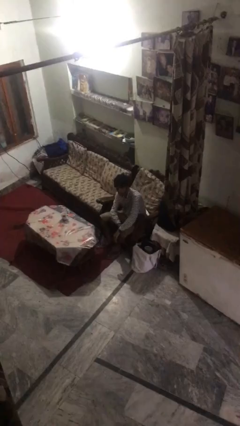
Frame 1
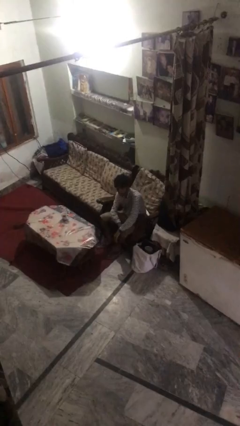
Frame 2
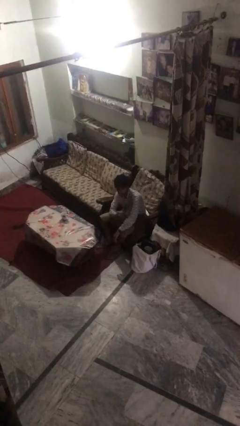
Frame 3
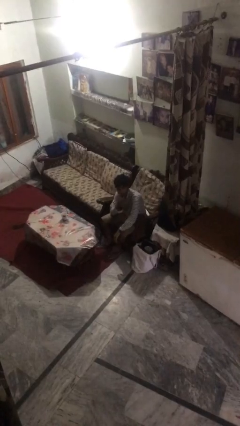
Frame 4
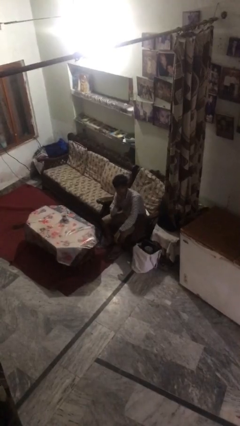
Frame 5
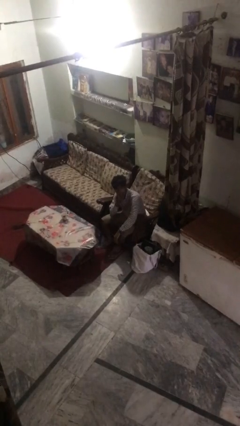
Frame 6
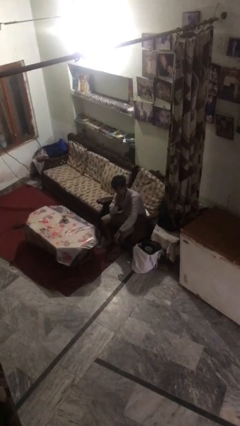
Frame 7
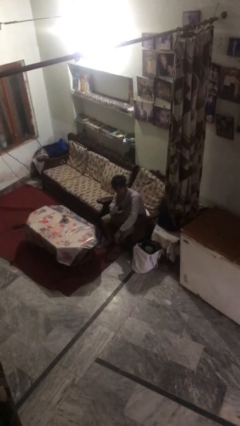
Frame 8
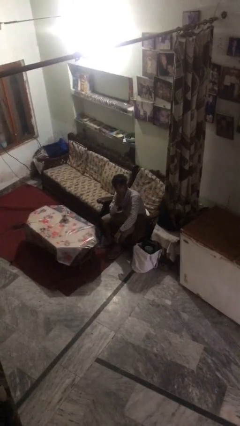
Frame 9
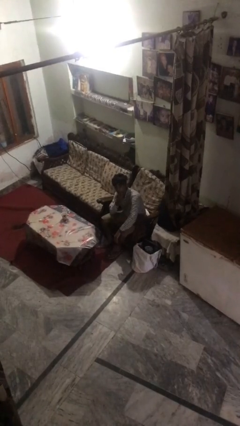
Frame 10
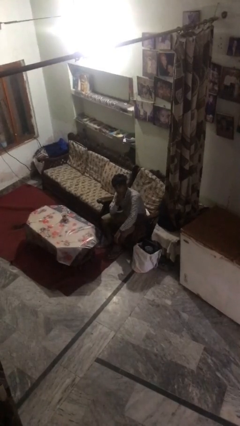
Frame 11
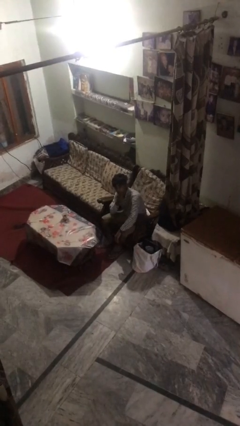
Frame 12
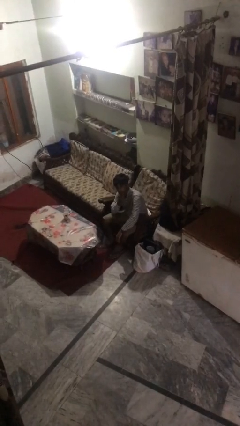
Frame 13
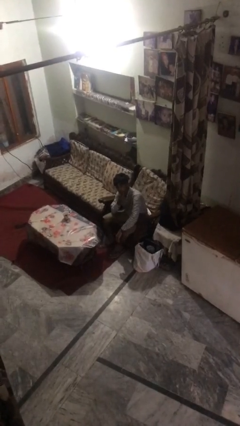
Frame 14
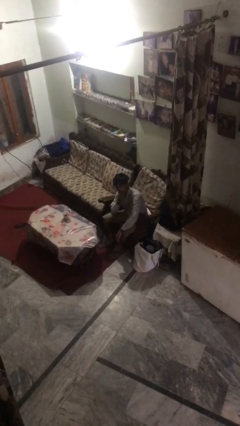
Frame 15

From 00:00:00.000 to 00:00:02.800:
person strokes chin

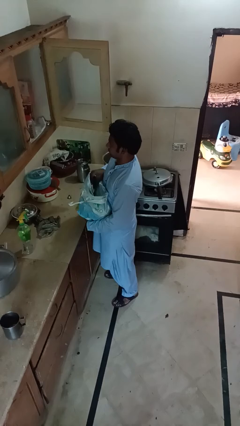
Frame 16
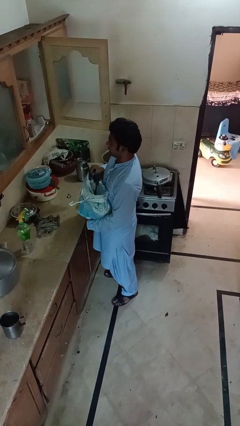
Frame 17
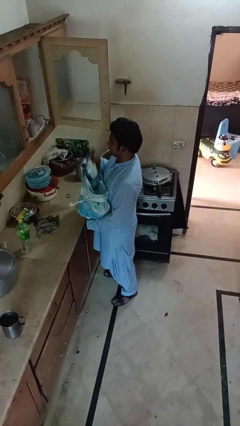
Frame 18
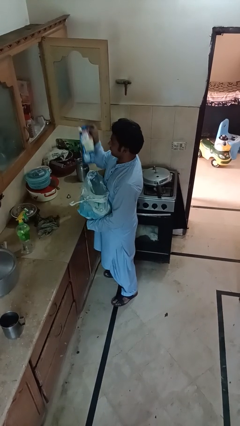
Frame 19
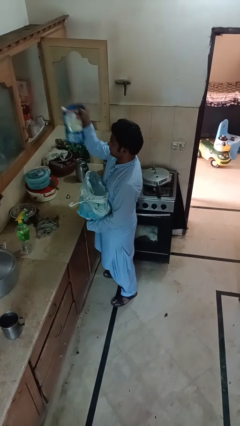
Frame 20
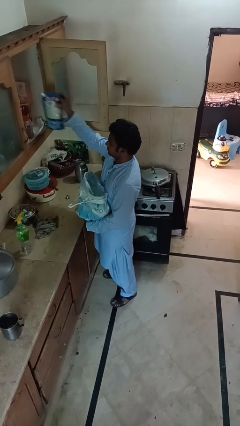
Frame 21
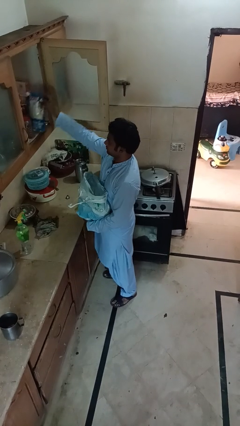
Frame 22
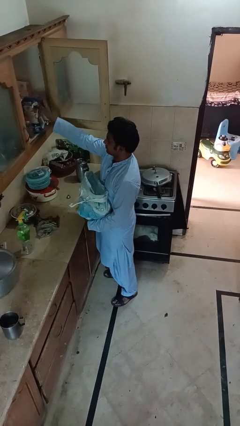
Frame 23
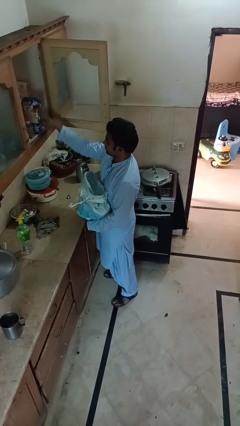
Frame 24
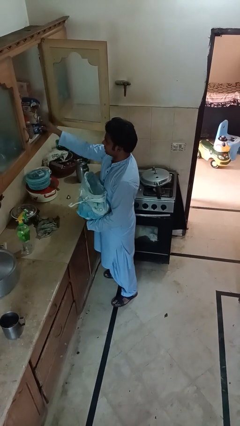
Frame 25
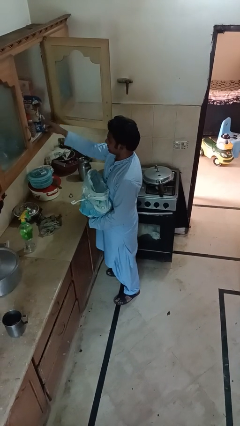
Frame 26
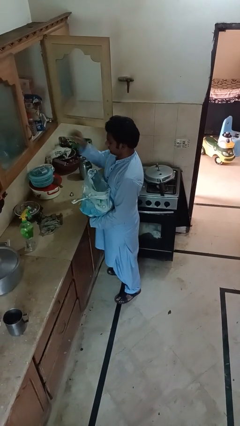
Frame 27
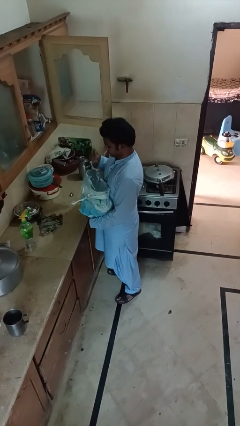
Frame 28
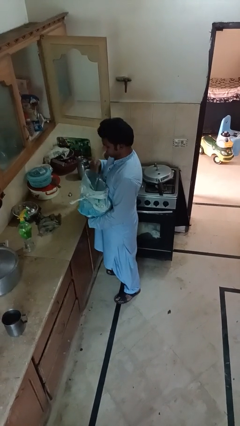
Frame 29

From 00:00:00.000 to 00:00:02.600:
person loads groceries into cabinet

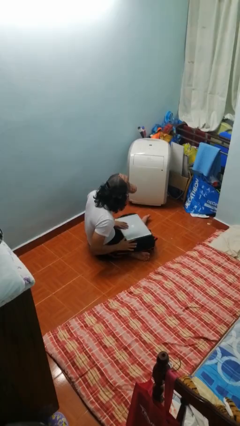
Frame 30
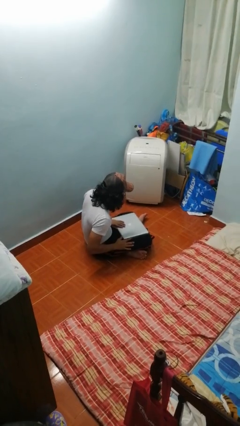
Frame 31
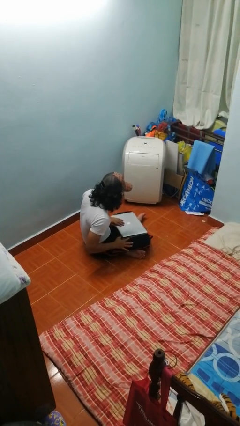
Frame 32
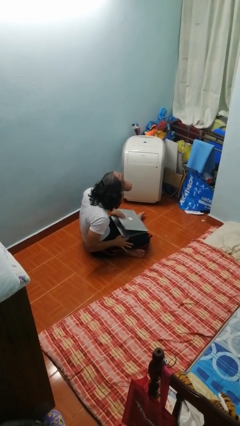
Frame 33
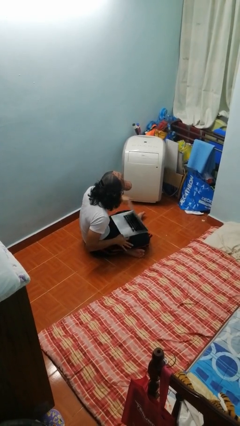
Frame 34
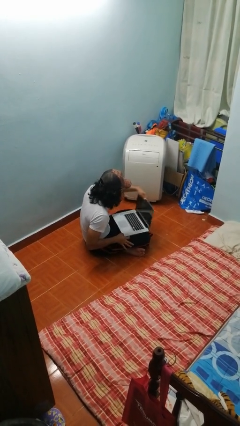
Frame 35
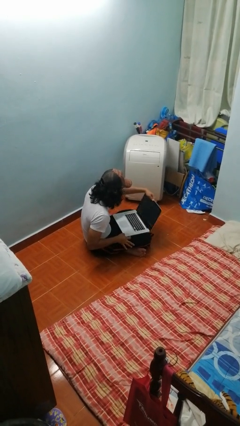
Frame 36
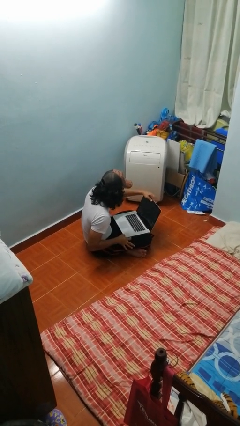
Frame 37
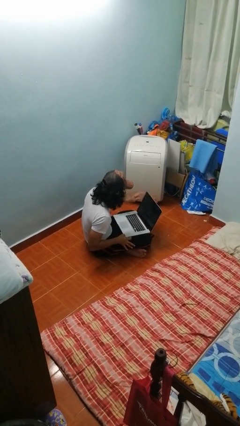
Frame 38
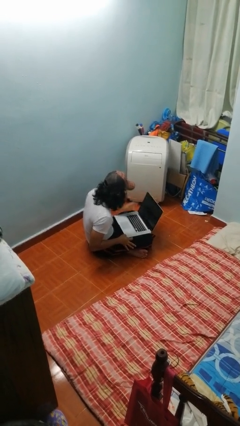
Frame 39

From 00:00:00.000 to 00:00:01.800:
person opens laptop

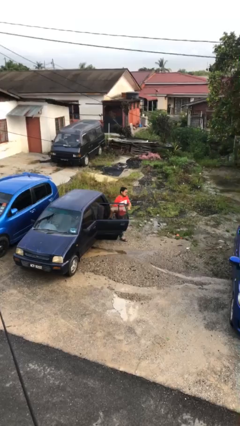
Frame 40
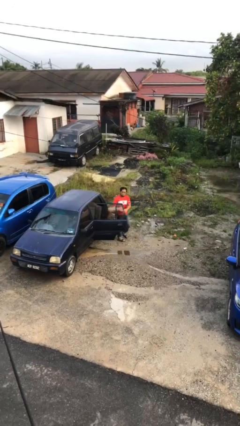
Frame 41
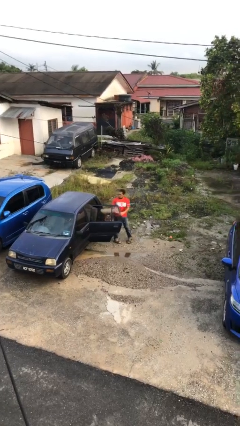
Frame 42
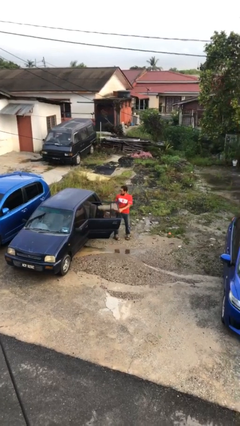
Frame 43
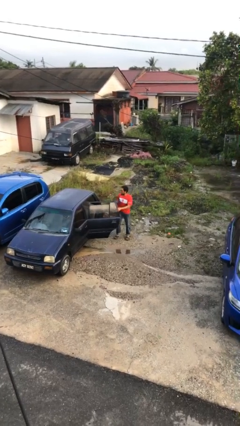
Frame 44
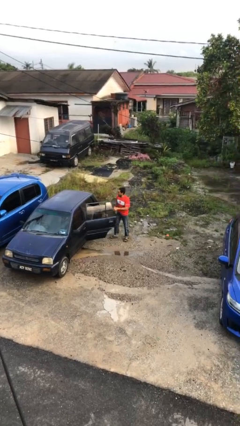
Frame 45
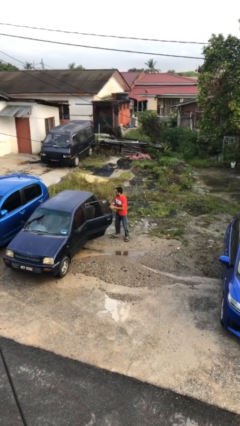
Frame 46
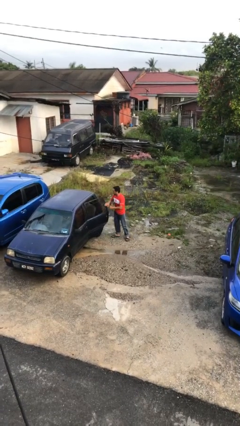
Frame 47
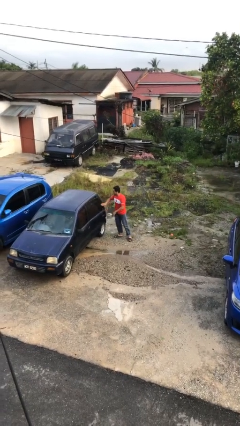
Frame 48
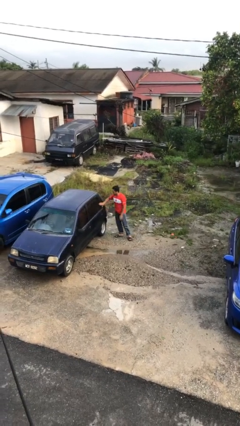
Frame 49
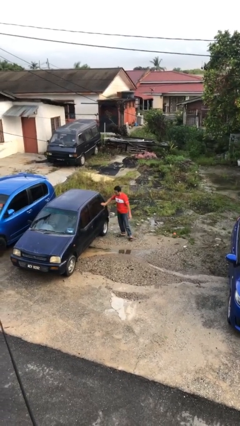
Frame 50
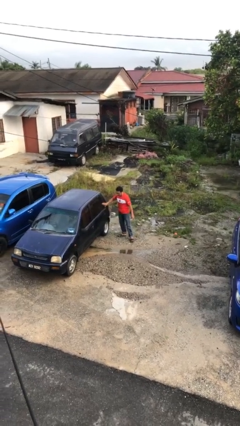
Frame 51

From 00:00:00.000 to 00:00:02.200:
person closes car door

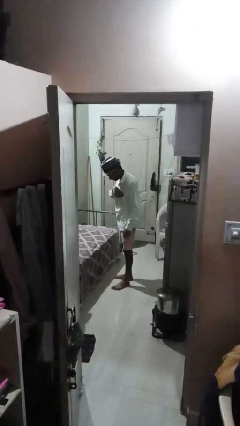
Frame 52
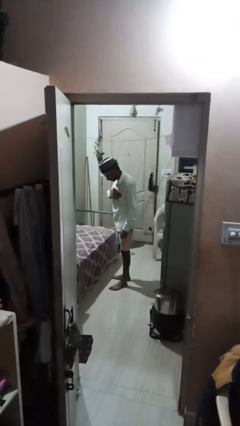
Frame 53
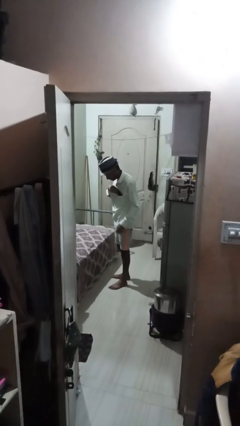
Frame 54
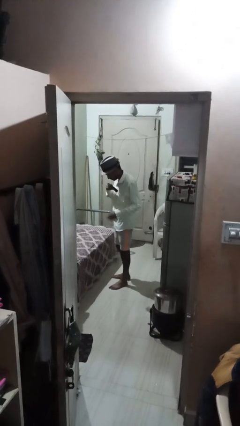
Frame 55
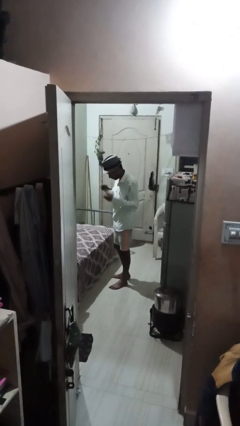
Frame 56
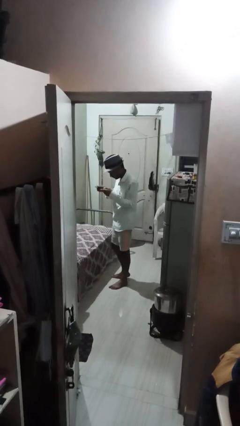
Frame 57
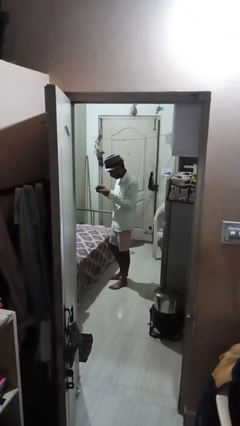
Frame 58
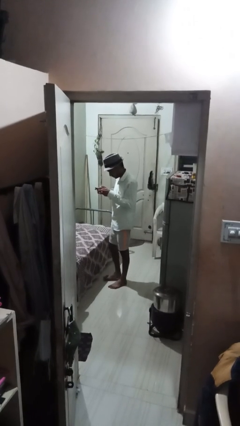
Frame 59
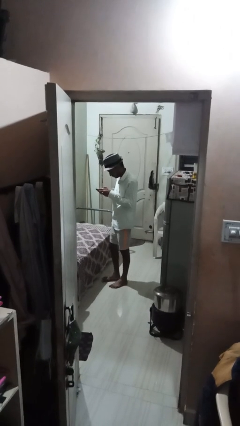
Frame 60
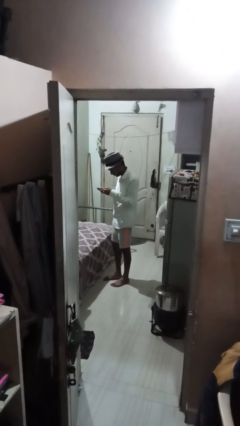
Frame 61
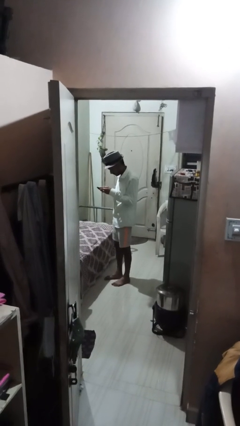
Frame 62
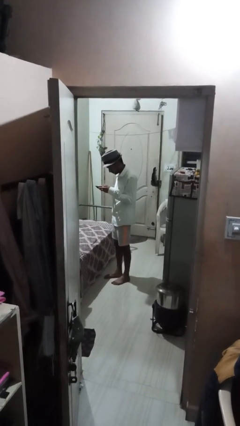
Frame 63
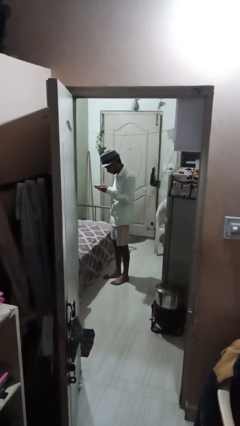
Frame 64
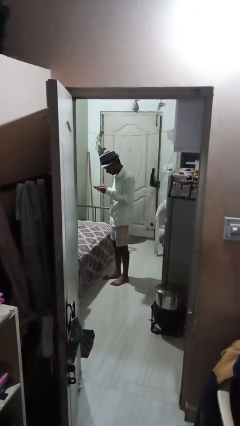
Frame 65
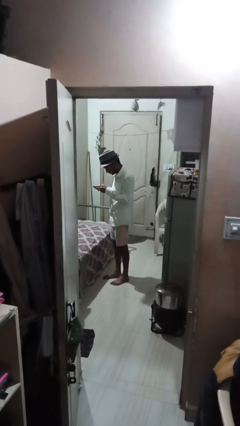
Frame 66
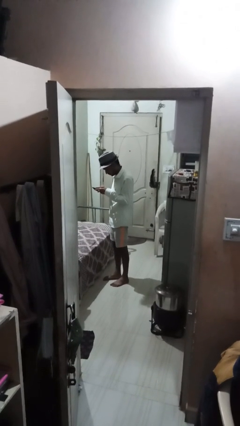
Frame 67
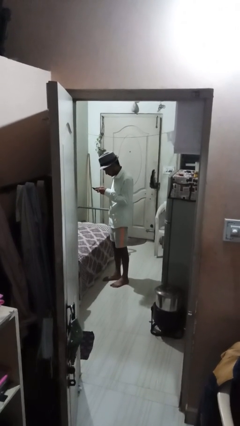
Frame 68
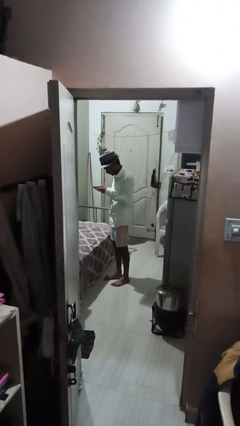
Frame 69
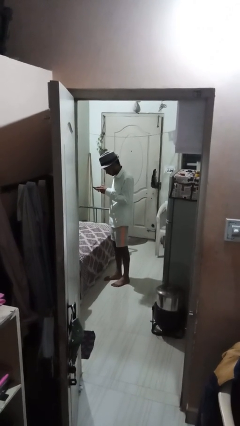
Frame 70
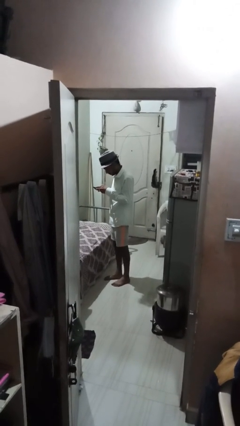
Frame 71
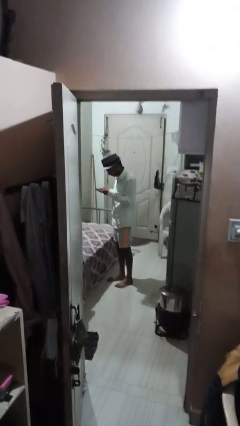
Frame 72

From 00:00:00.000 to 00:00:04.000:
person takes phone from pocket

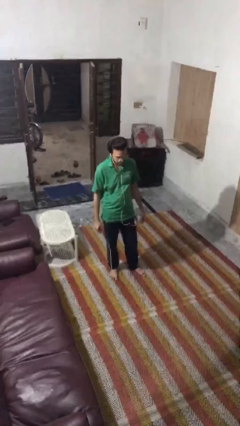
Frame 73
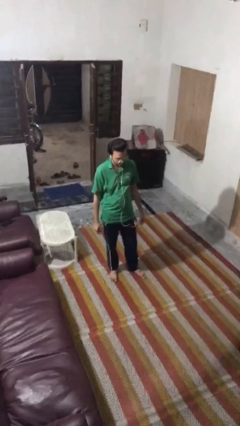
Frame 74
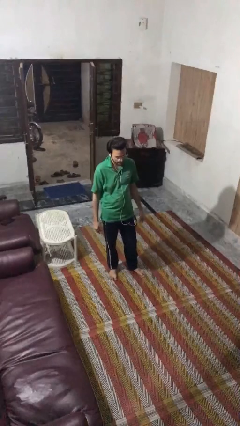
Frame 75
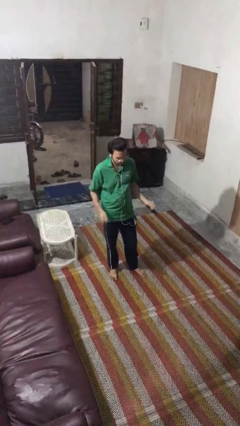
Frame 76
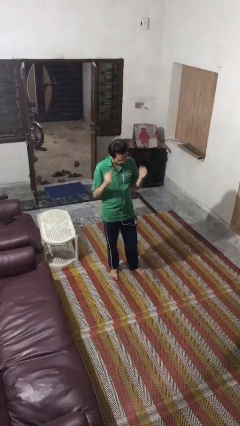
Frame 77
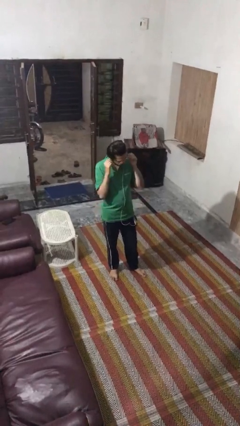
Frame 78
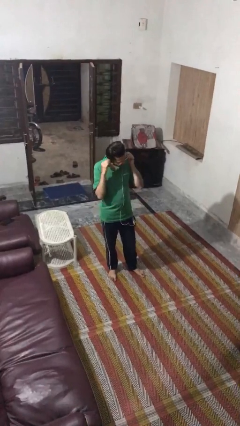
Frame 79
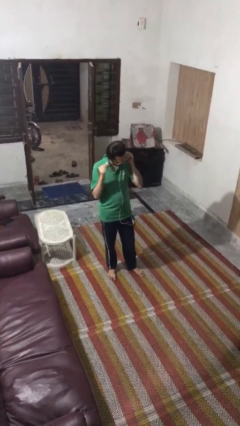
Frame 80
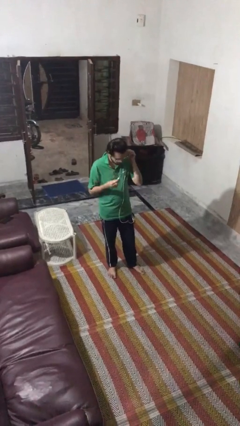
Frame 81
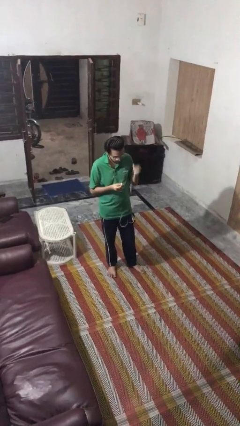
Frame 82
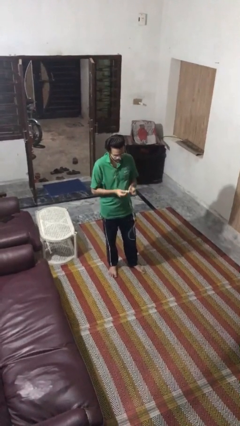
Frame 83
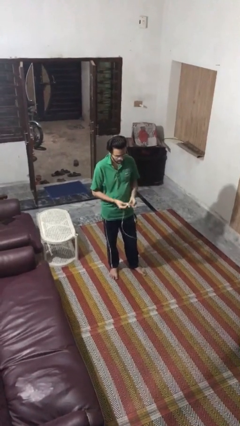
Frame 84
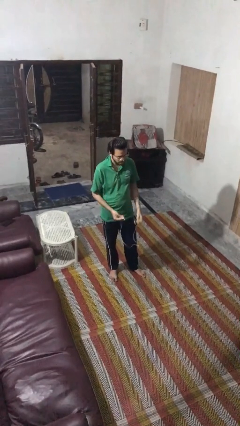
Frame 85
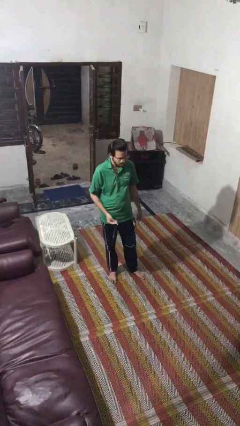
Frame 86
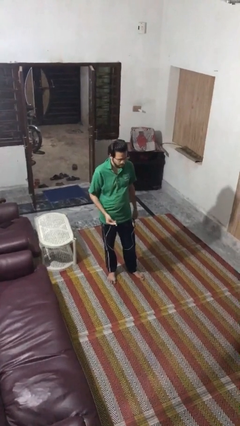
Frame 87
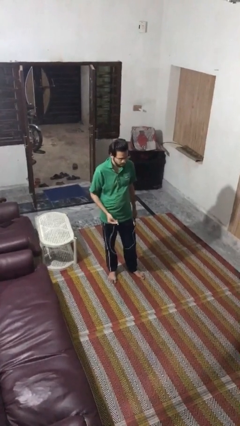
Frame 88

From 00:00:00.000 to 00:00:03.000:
person takes off headphones

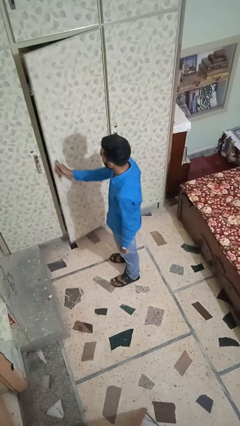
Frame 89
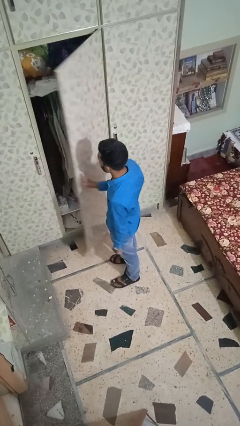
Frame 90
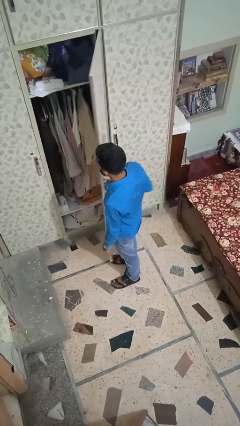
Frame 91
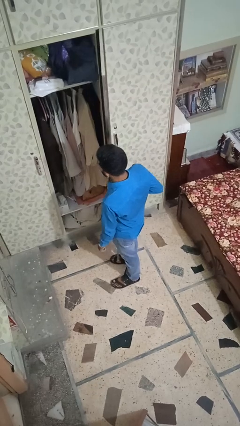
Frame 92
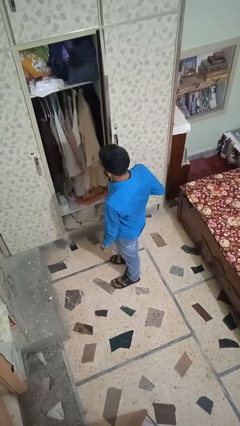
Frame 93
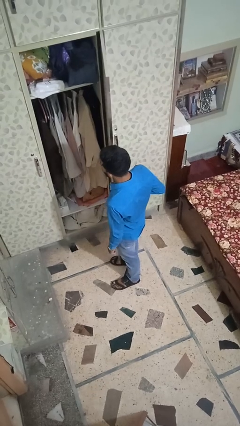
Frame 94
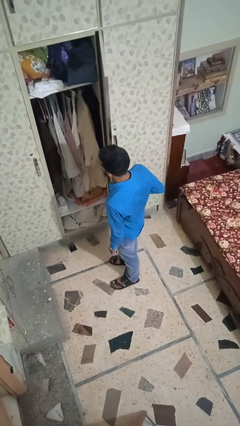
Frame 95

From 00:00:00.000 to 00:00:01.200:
person opens closet door
